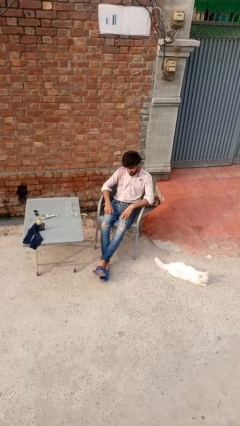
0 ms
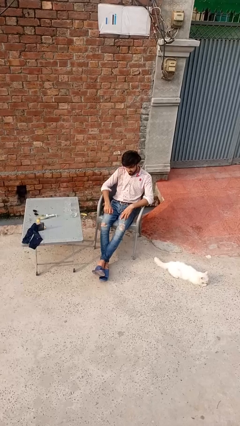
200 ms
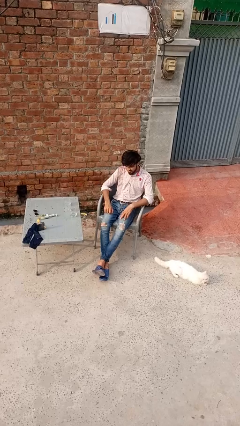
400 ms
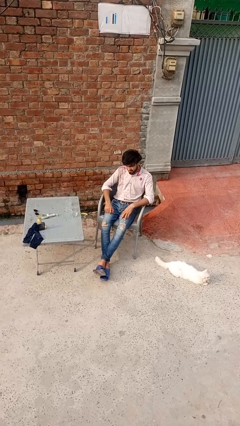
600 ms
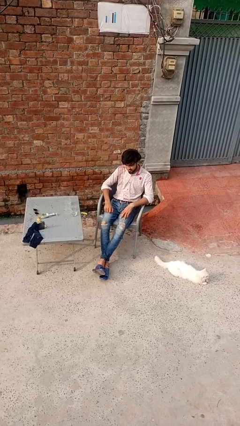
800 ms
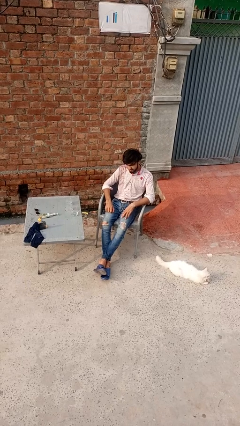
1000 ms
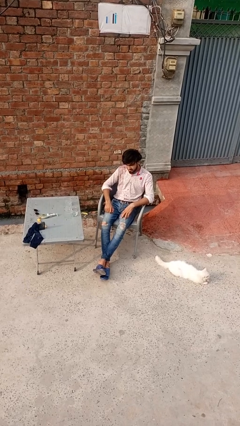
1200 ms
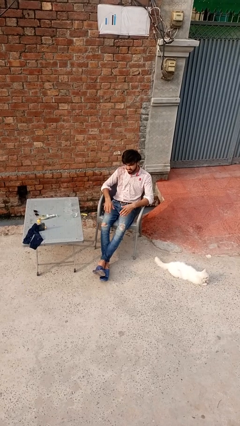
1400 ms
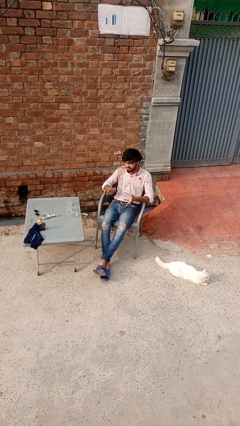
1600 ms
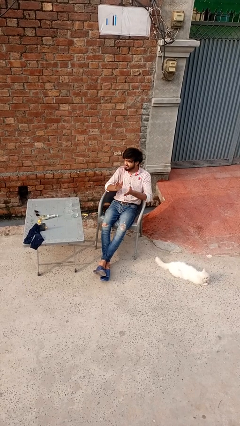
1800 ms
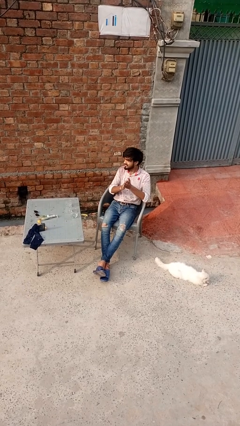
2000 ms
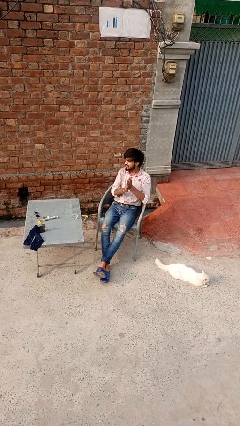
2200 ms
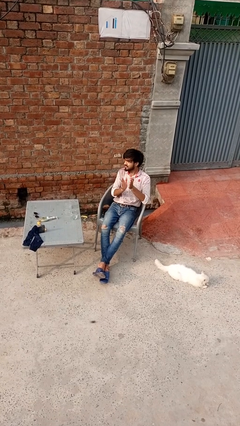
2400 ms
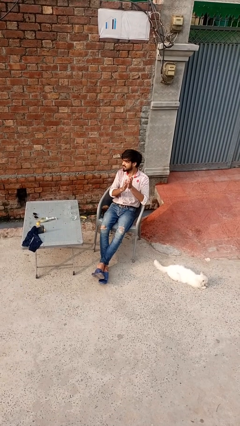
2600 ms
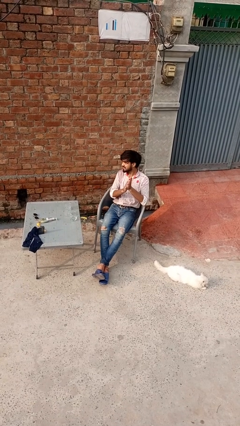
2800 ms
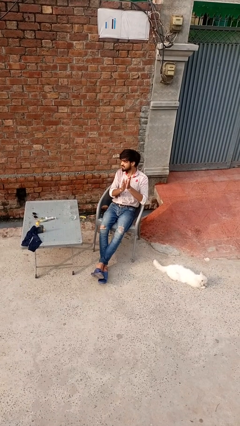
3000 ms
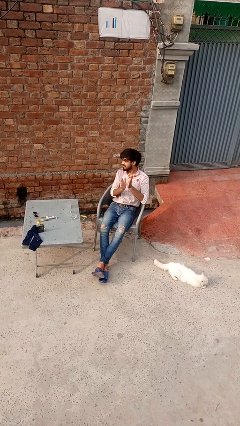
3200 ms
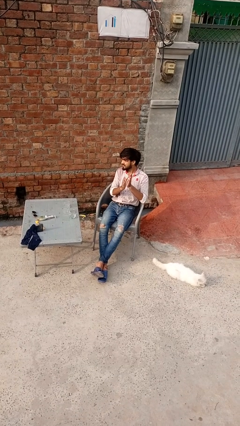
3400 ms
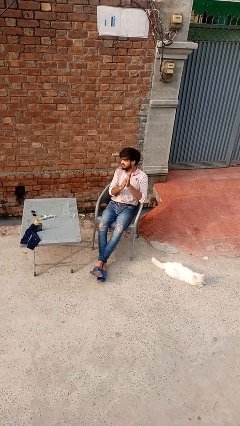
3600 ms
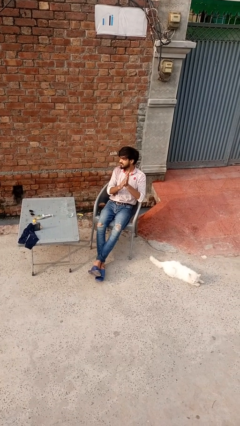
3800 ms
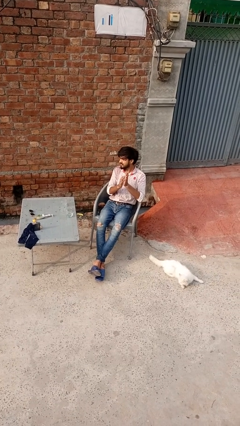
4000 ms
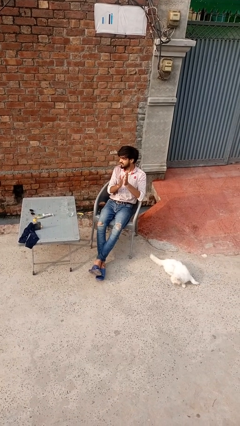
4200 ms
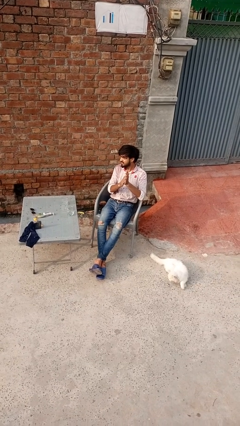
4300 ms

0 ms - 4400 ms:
person claps hands

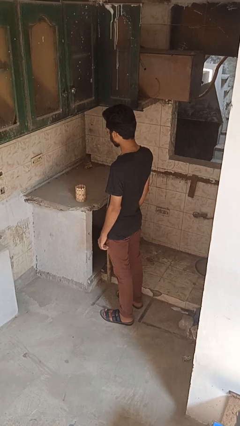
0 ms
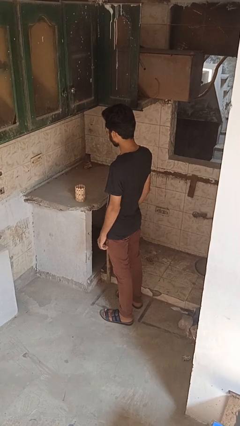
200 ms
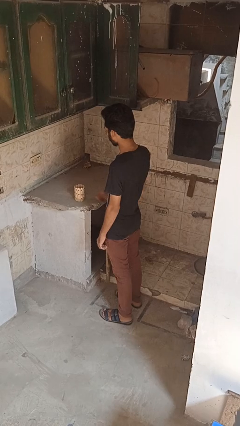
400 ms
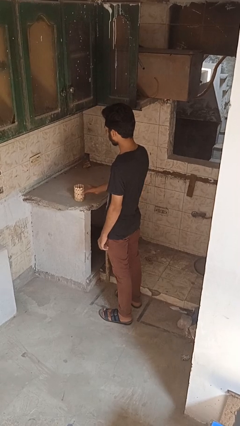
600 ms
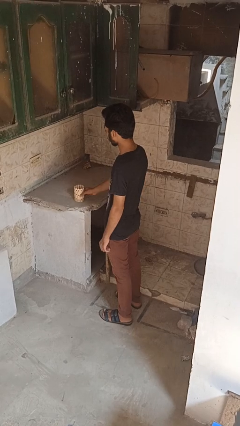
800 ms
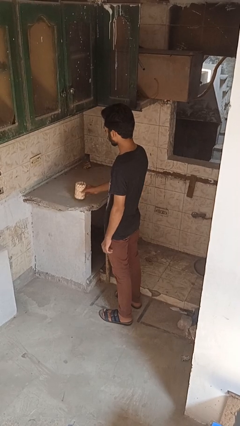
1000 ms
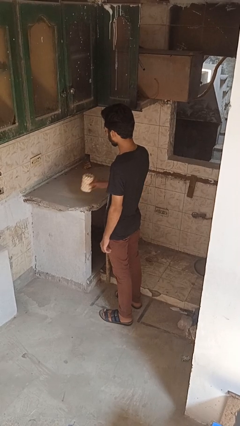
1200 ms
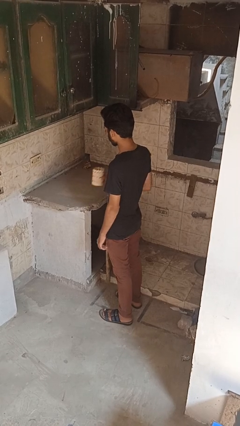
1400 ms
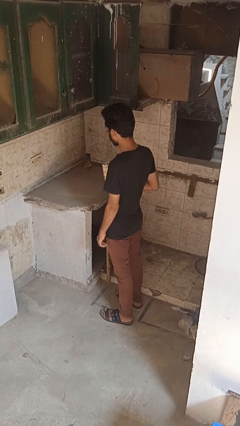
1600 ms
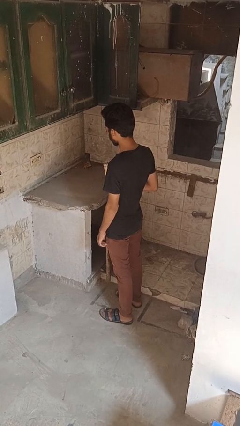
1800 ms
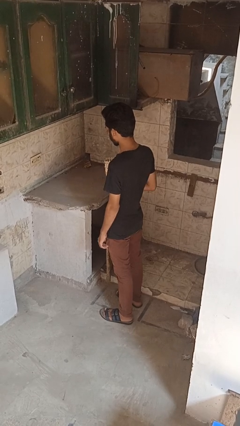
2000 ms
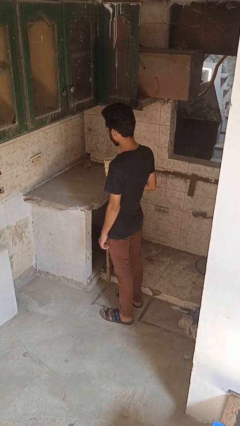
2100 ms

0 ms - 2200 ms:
person picks up object from countertop

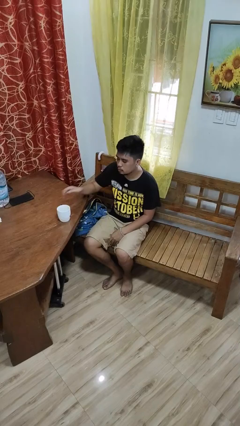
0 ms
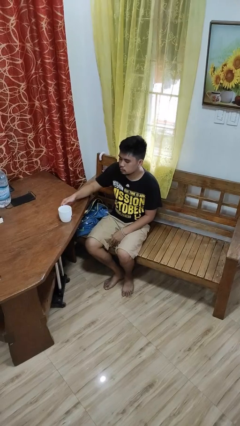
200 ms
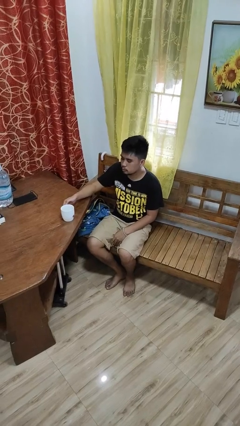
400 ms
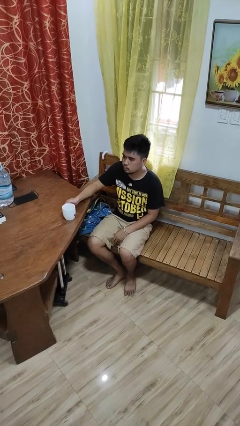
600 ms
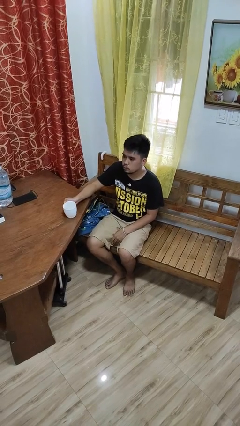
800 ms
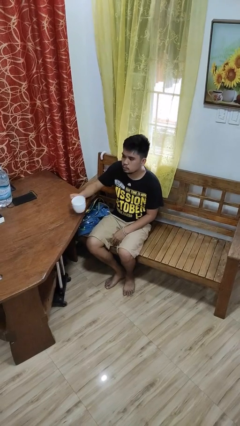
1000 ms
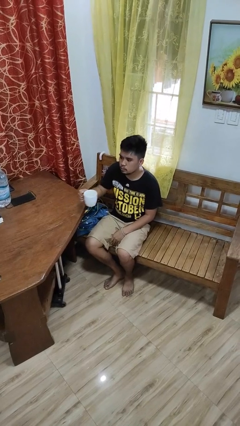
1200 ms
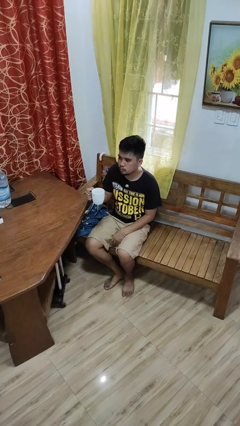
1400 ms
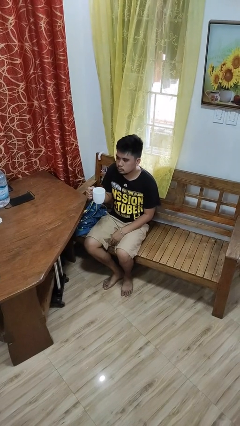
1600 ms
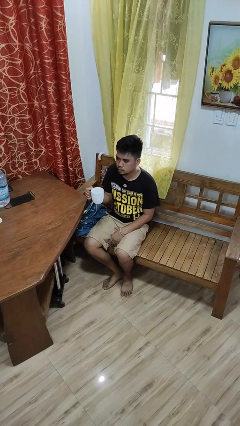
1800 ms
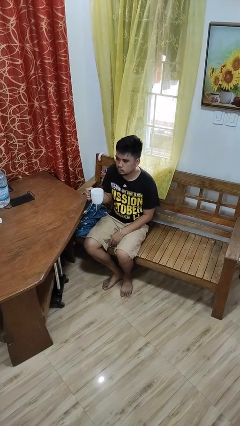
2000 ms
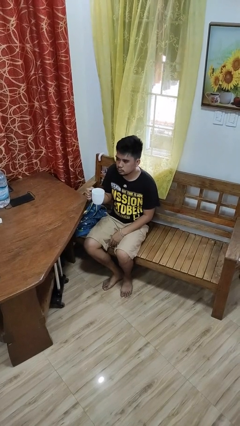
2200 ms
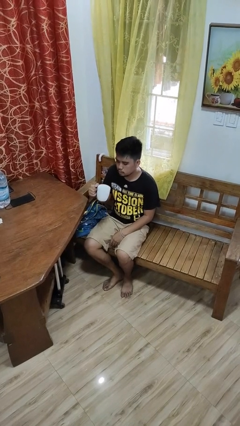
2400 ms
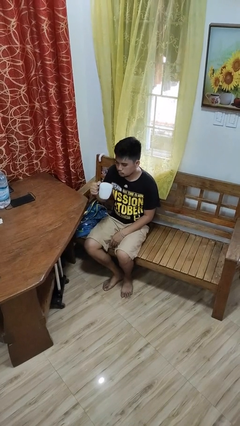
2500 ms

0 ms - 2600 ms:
person picks up object from table

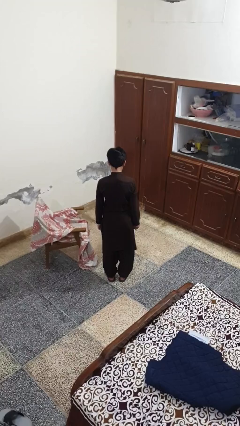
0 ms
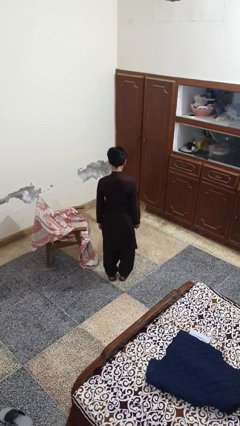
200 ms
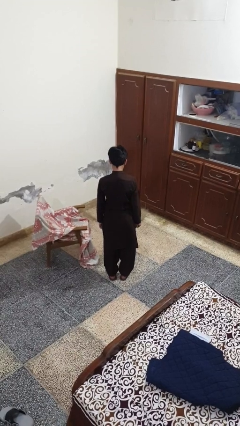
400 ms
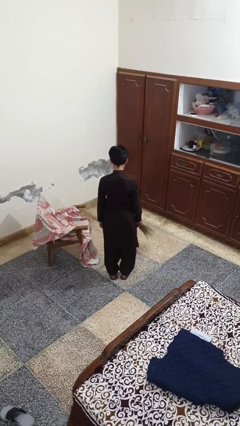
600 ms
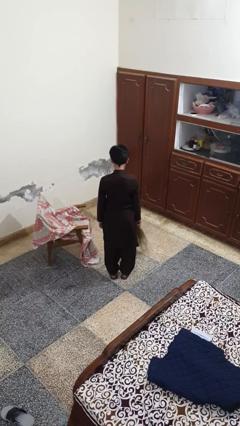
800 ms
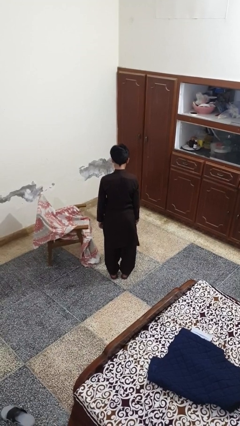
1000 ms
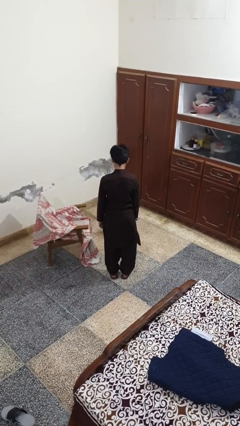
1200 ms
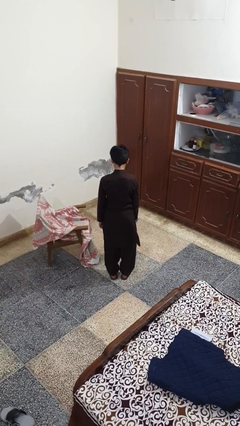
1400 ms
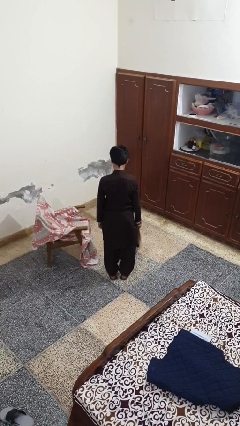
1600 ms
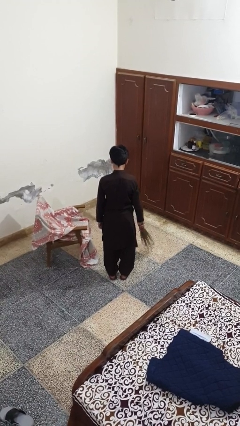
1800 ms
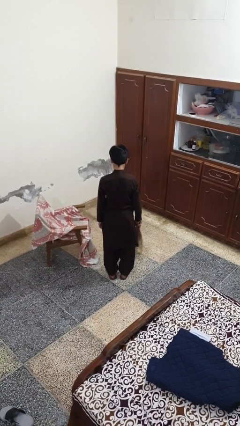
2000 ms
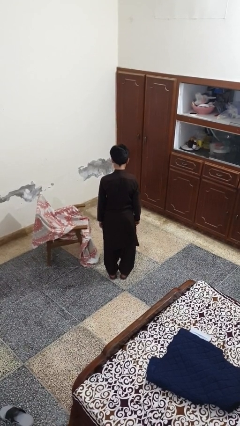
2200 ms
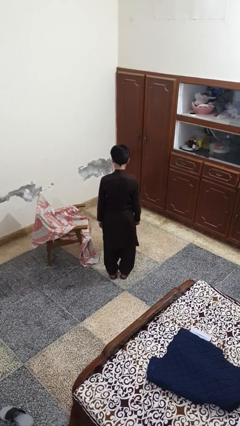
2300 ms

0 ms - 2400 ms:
person sweeps floor

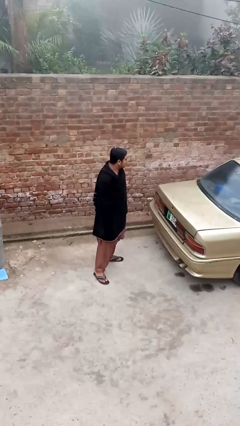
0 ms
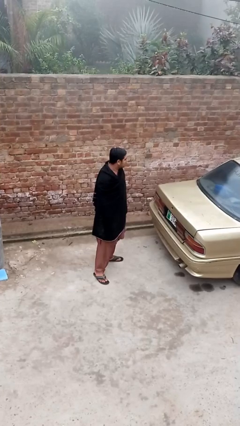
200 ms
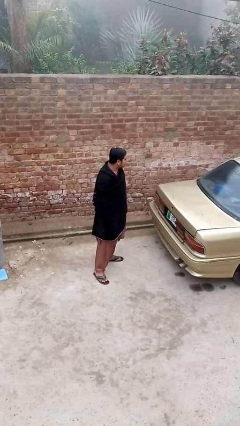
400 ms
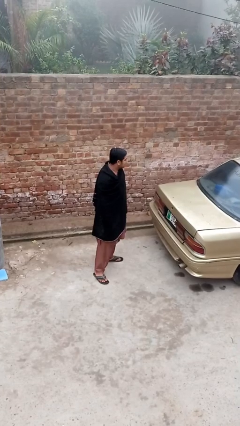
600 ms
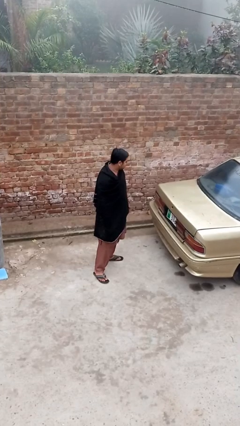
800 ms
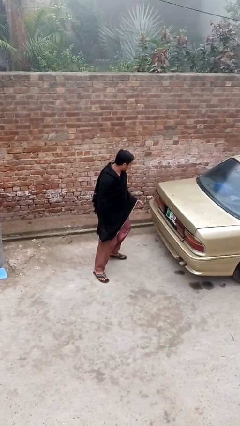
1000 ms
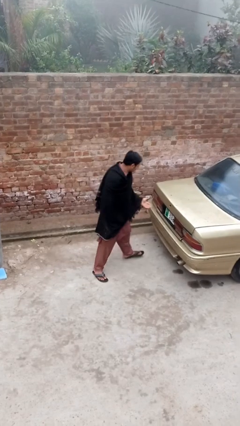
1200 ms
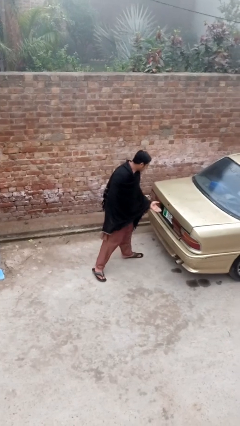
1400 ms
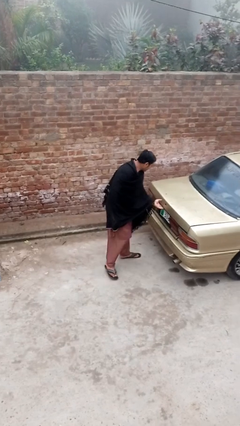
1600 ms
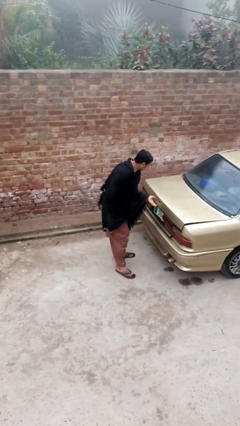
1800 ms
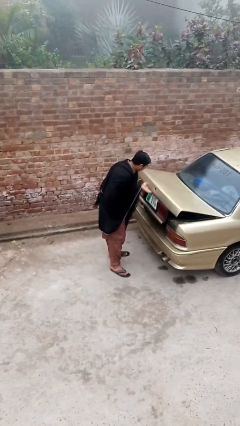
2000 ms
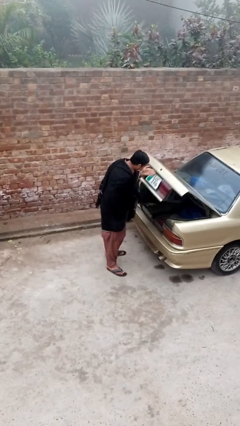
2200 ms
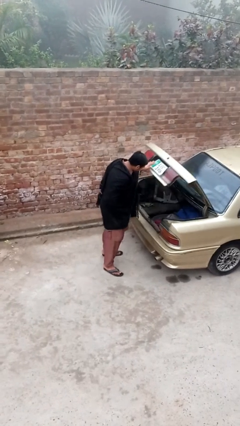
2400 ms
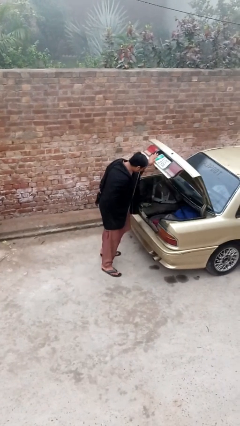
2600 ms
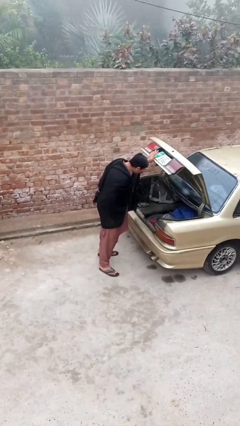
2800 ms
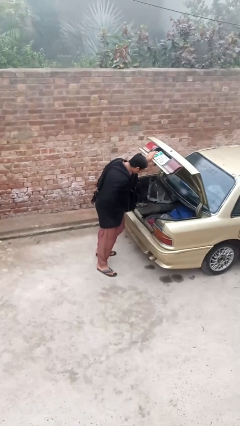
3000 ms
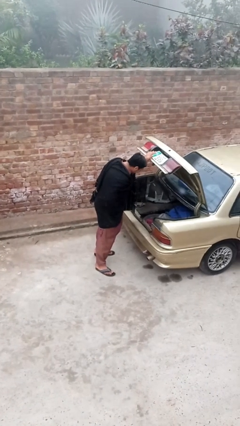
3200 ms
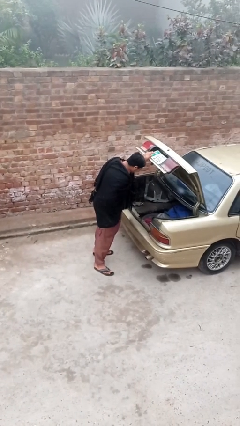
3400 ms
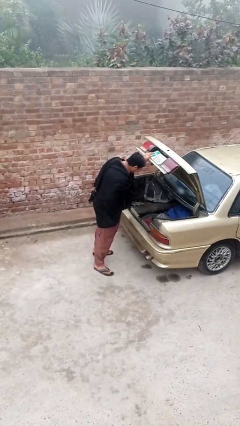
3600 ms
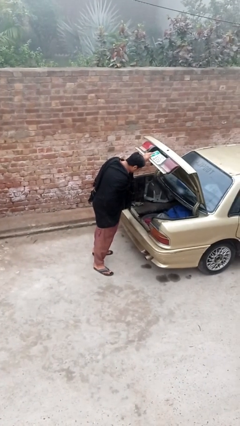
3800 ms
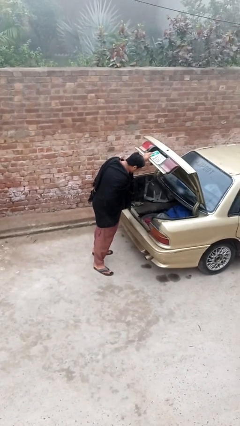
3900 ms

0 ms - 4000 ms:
person opens car trunk

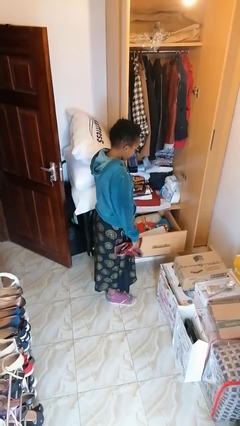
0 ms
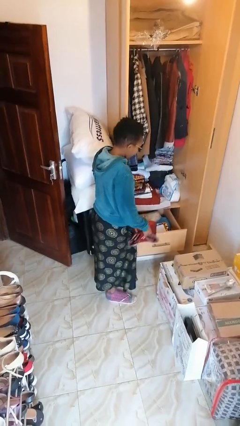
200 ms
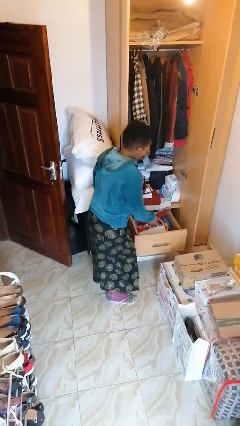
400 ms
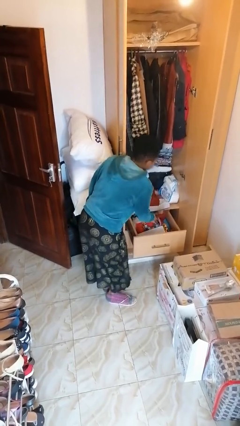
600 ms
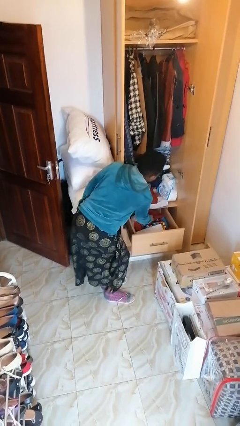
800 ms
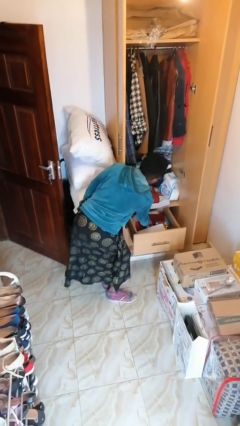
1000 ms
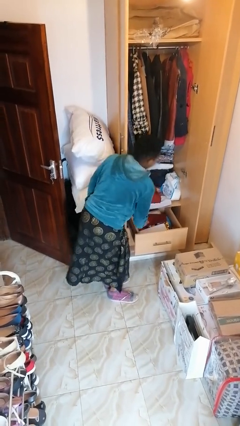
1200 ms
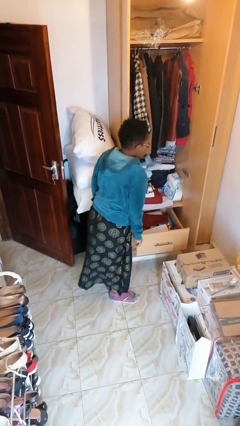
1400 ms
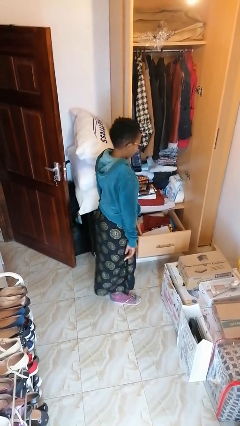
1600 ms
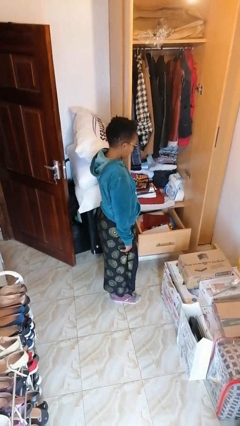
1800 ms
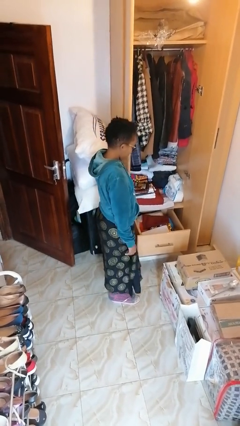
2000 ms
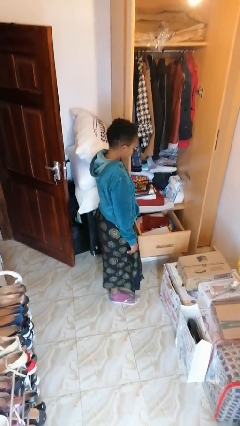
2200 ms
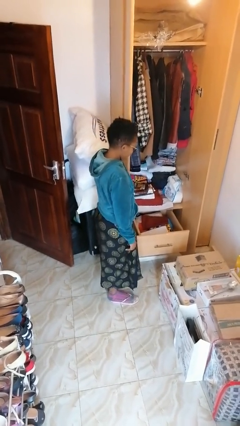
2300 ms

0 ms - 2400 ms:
person puts clothes into dresser
